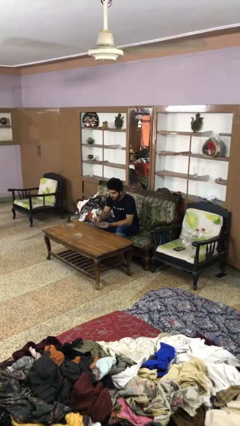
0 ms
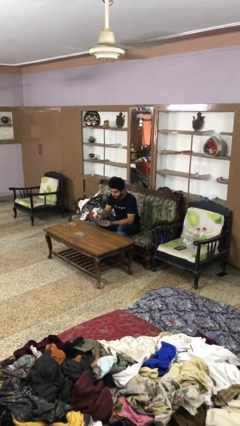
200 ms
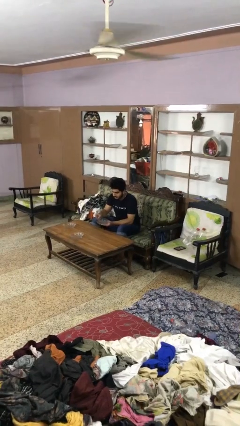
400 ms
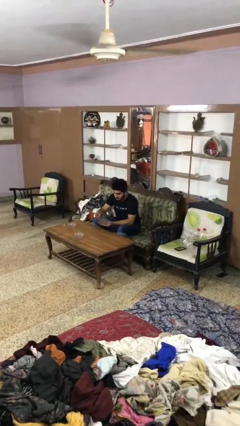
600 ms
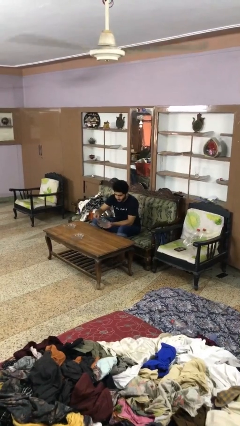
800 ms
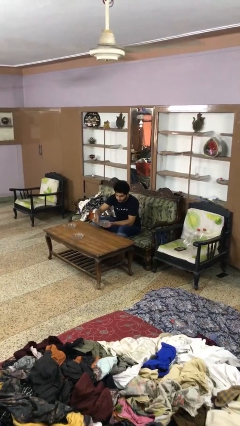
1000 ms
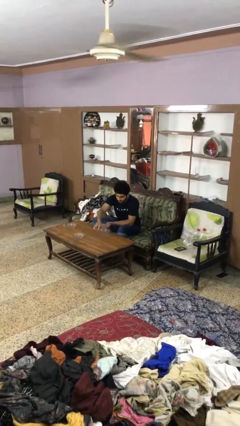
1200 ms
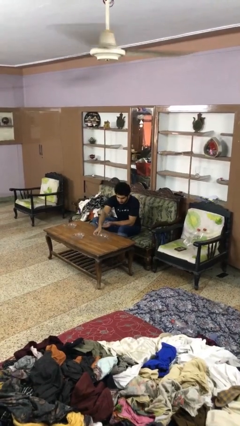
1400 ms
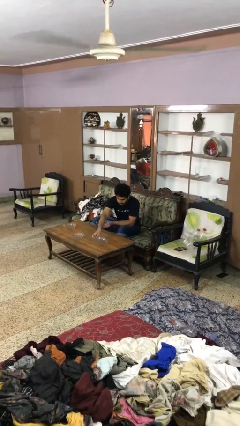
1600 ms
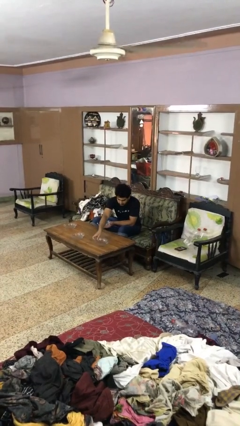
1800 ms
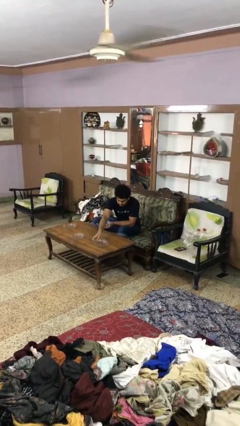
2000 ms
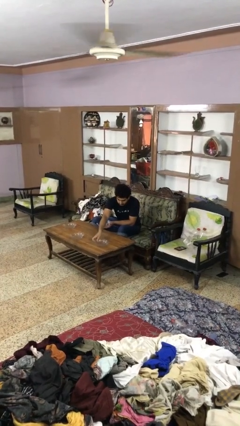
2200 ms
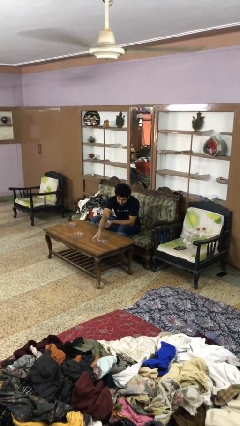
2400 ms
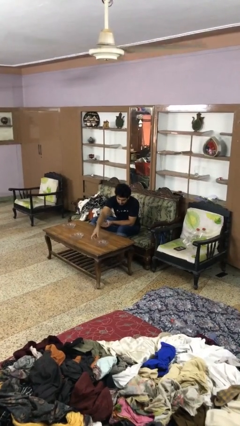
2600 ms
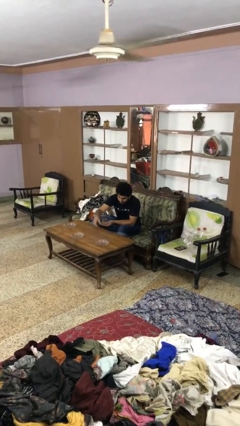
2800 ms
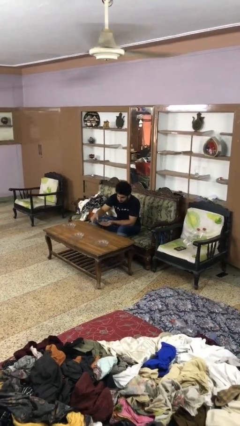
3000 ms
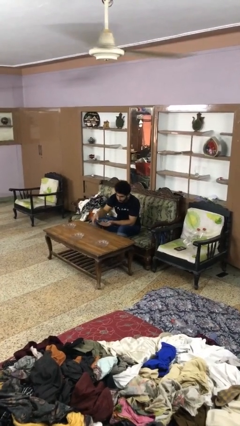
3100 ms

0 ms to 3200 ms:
person sets table

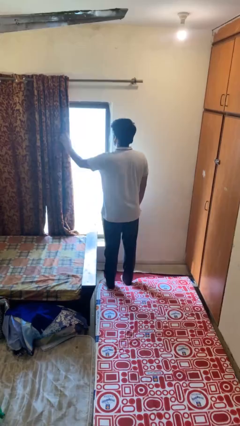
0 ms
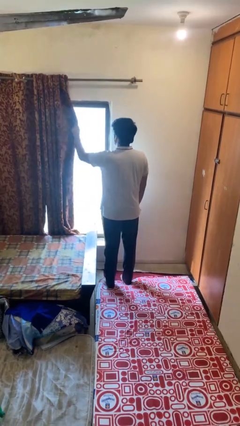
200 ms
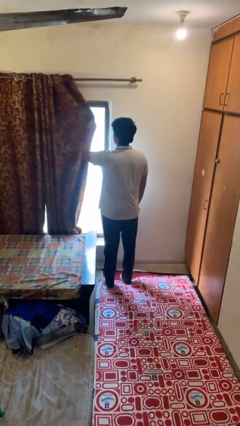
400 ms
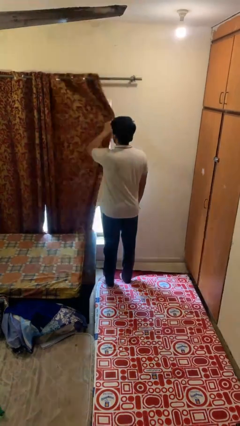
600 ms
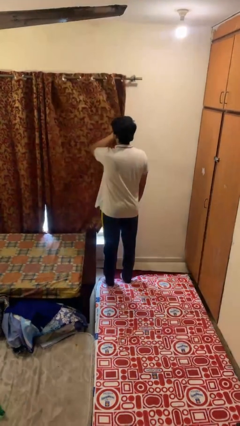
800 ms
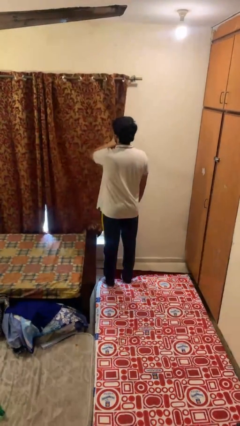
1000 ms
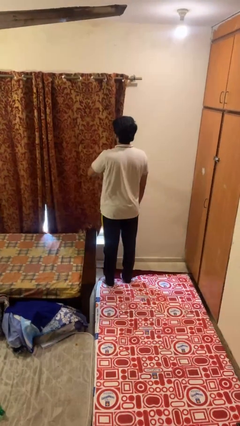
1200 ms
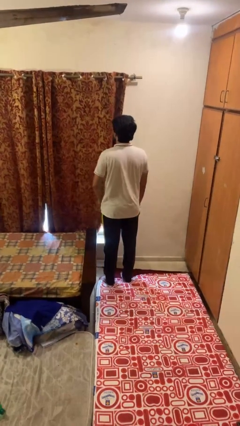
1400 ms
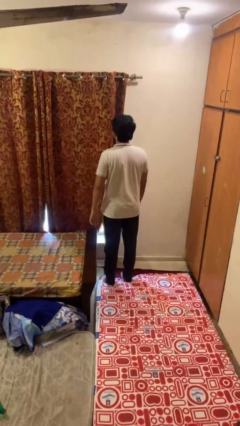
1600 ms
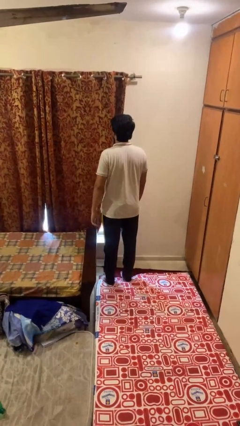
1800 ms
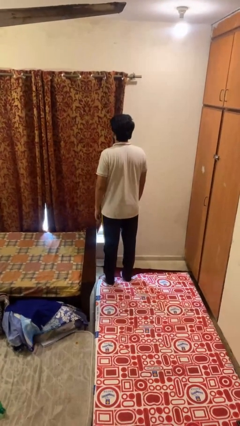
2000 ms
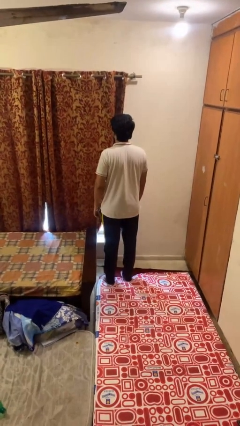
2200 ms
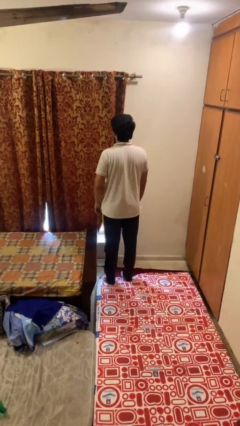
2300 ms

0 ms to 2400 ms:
person closes curtains

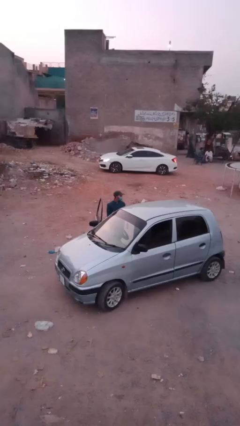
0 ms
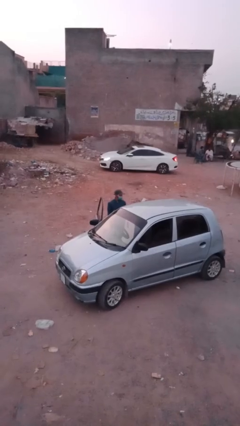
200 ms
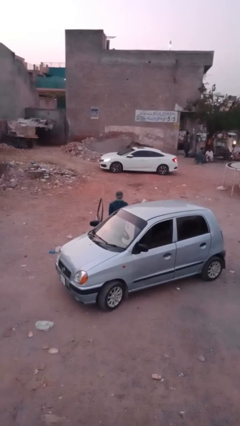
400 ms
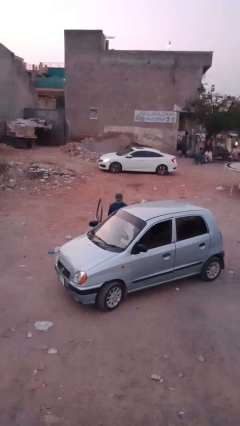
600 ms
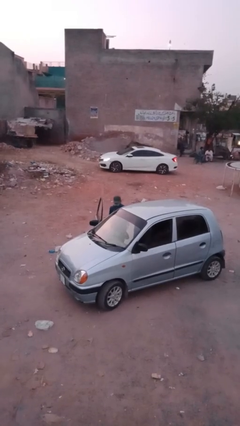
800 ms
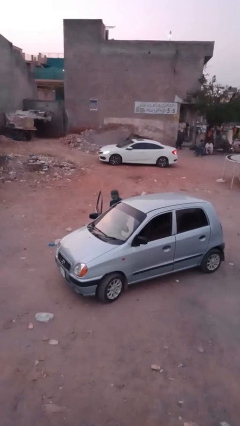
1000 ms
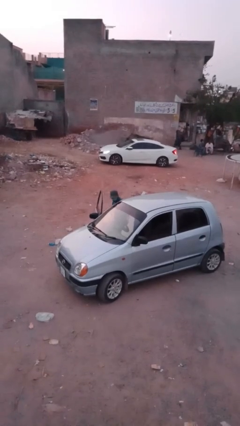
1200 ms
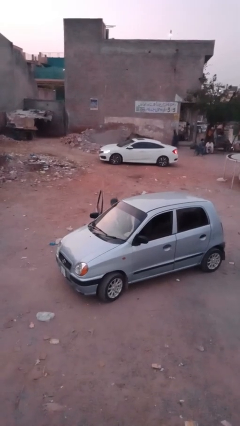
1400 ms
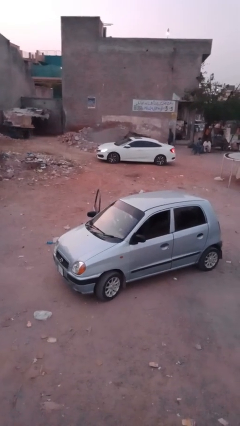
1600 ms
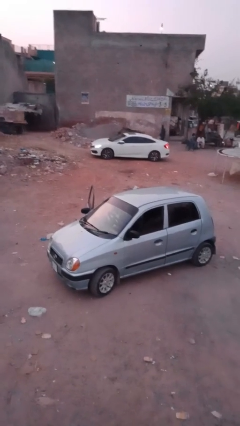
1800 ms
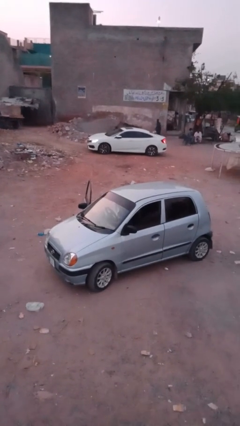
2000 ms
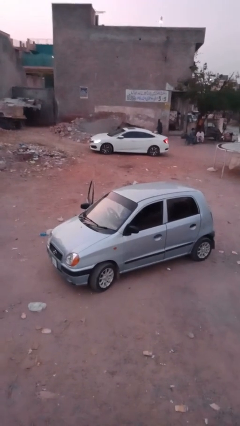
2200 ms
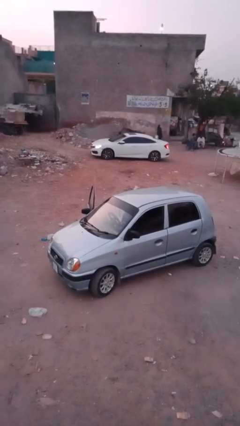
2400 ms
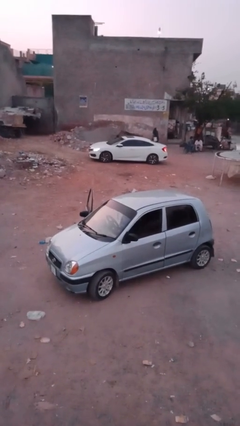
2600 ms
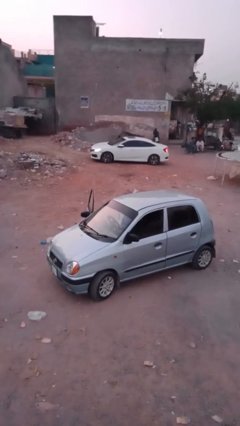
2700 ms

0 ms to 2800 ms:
person enters car

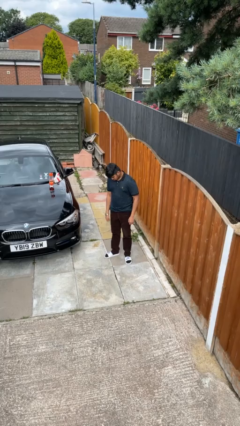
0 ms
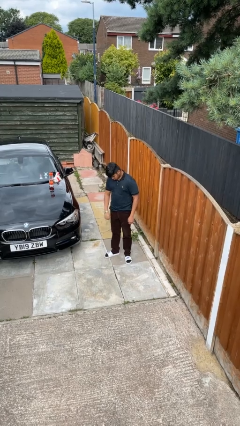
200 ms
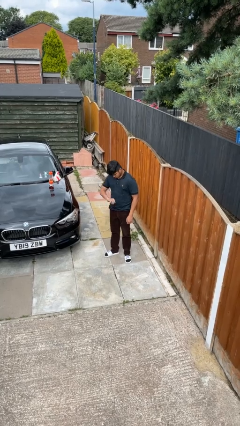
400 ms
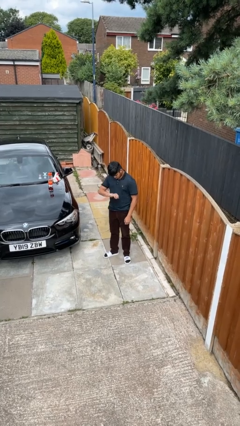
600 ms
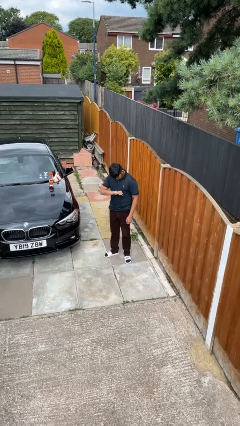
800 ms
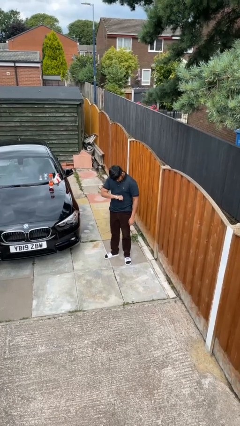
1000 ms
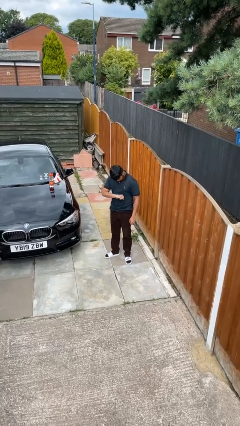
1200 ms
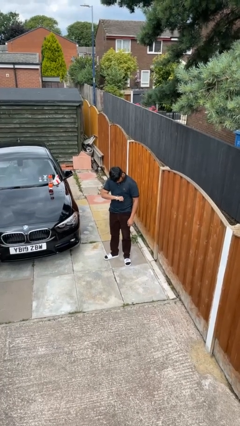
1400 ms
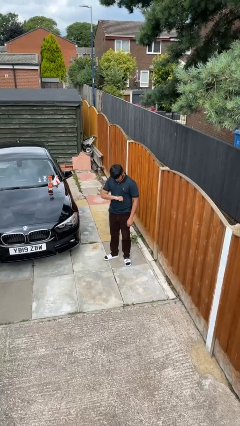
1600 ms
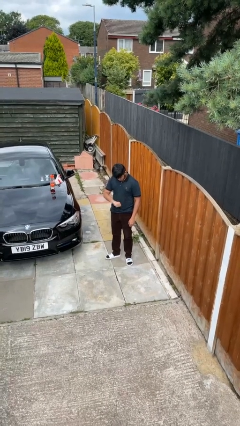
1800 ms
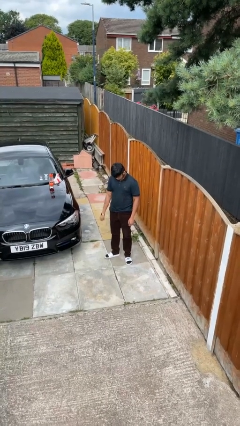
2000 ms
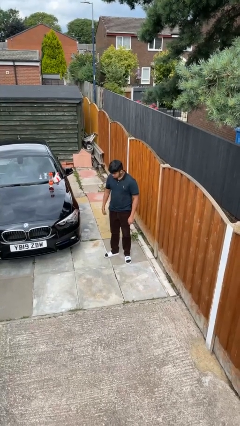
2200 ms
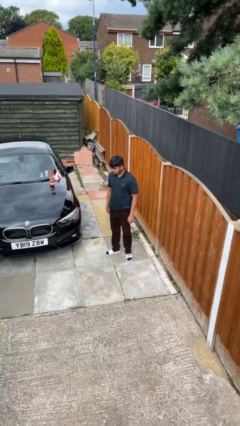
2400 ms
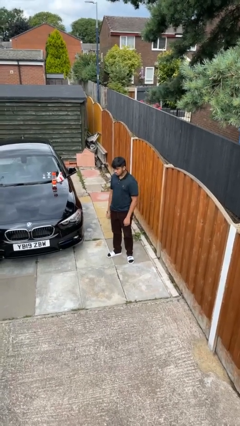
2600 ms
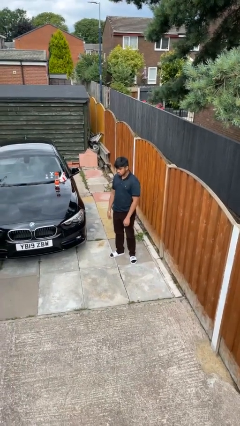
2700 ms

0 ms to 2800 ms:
person looks at wristwatch

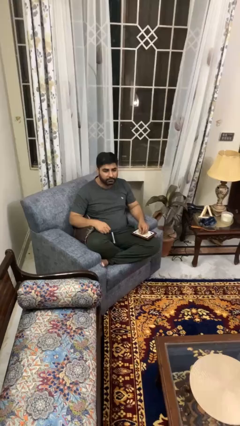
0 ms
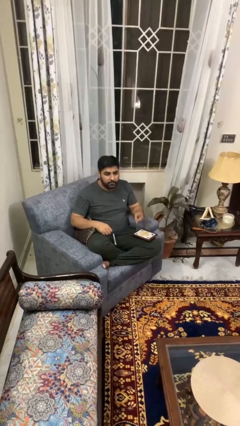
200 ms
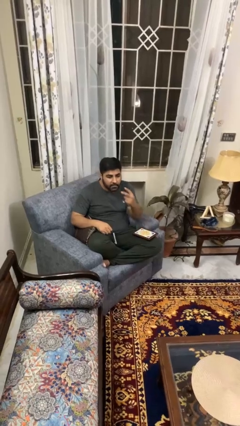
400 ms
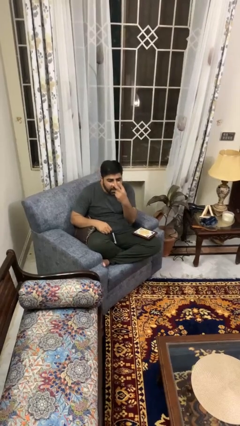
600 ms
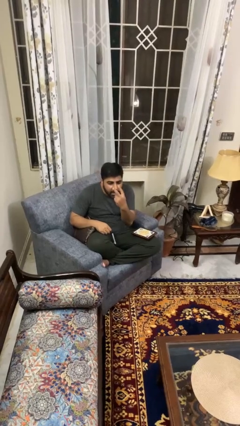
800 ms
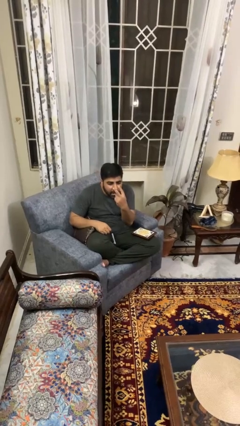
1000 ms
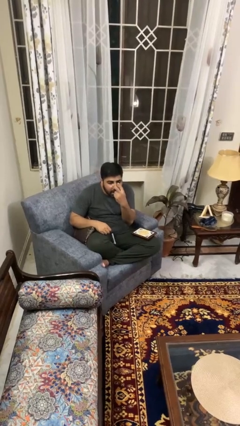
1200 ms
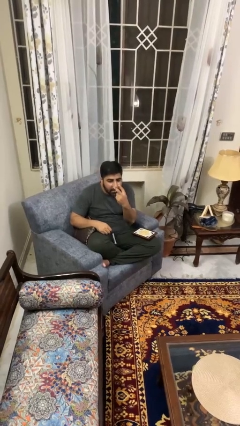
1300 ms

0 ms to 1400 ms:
person gestures watch closely

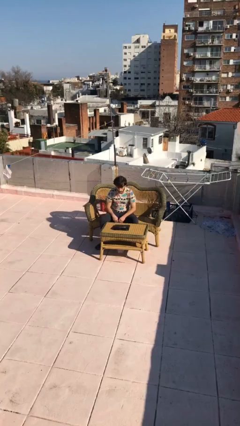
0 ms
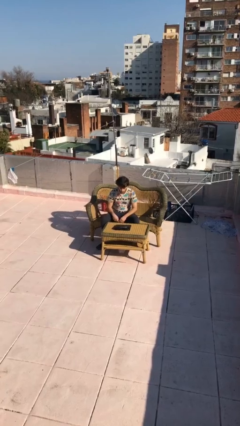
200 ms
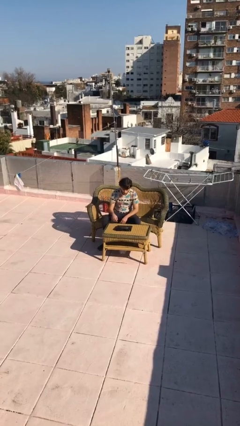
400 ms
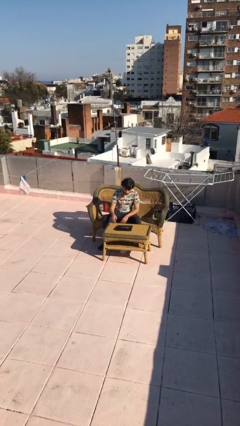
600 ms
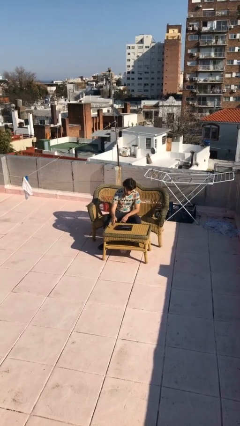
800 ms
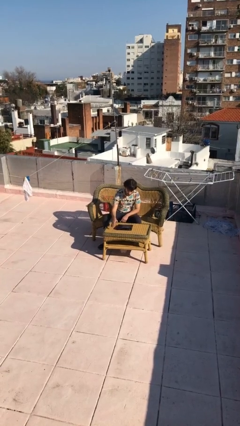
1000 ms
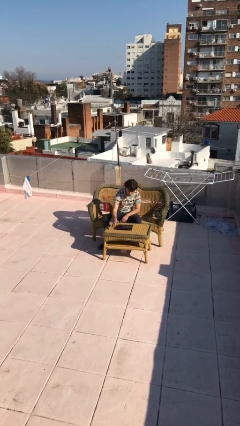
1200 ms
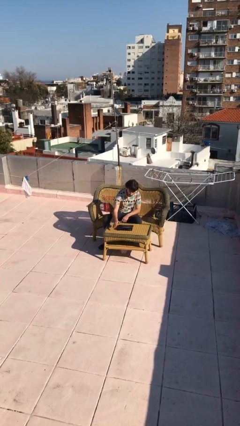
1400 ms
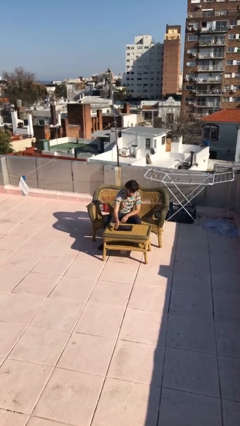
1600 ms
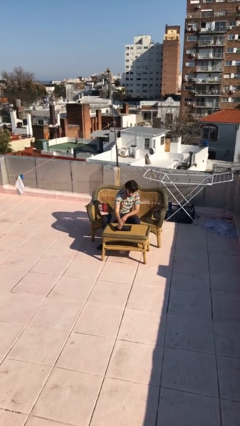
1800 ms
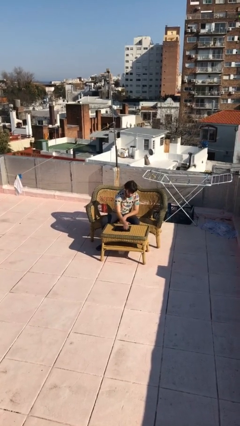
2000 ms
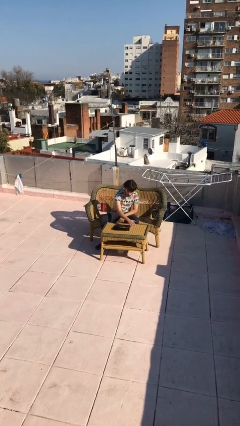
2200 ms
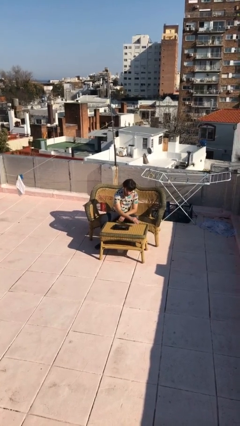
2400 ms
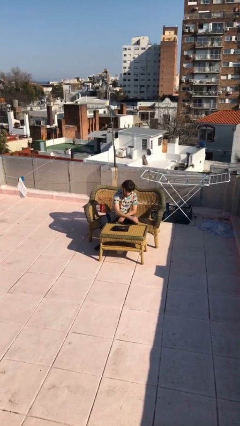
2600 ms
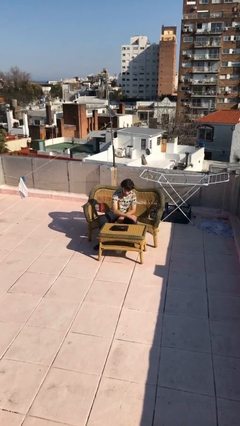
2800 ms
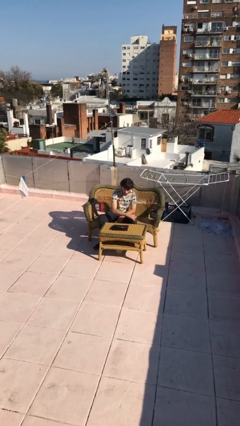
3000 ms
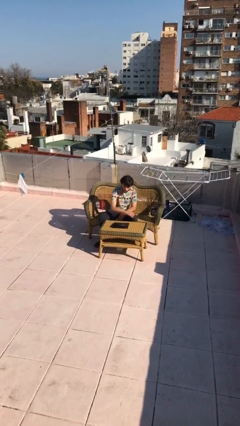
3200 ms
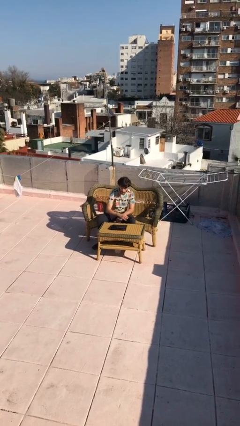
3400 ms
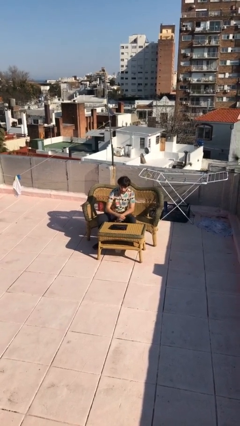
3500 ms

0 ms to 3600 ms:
person waves hand over object

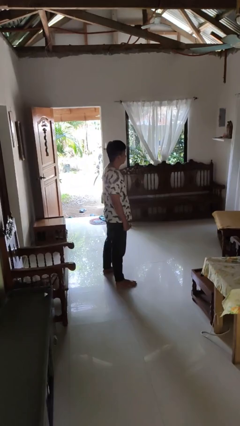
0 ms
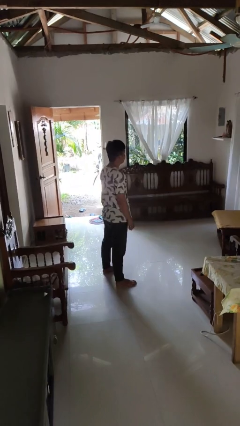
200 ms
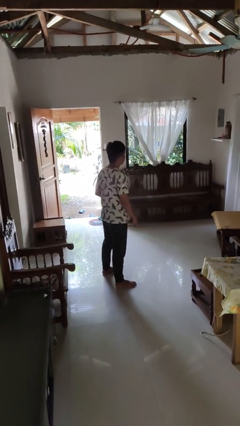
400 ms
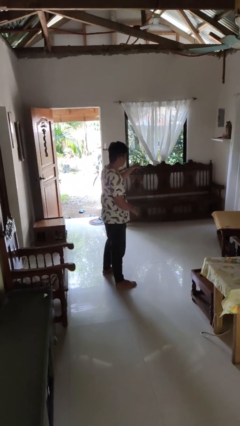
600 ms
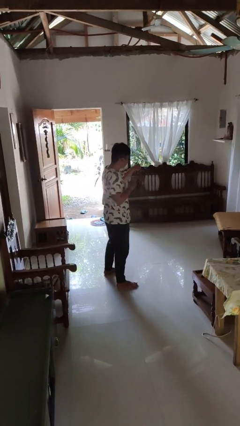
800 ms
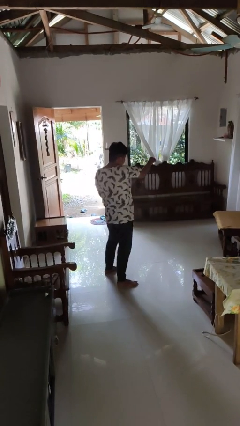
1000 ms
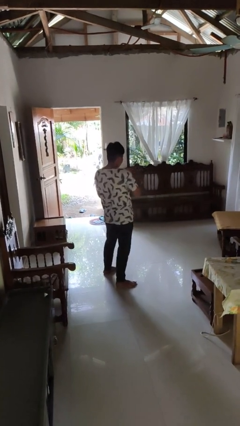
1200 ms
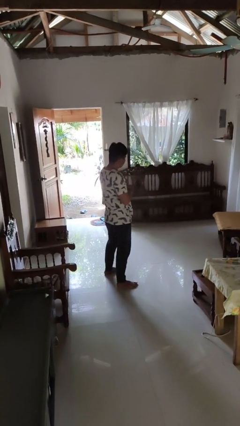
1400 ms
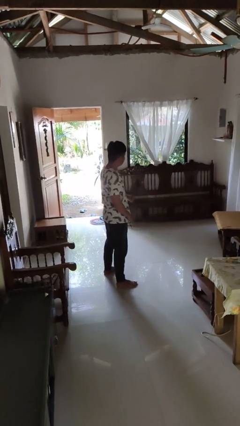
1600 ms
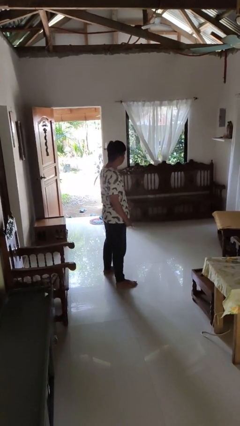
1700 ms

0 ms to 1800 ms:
person punches
